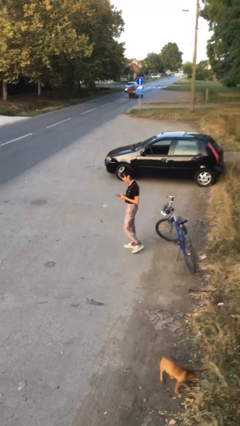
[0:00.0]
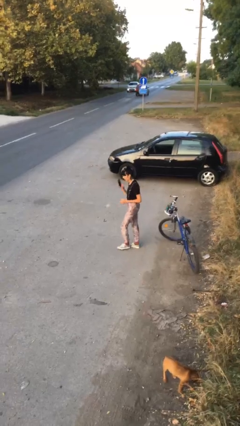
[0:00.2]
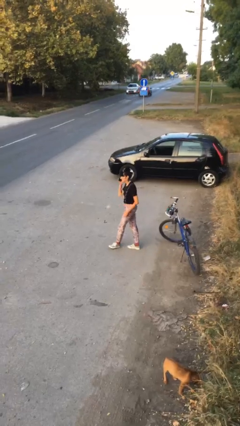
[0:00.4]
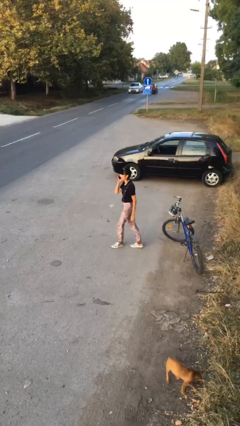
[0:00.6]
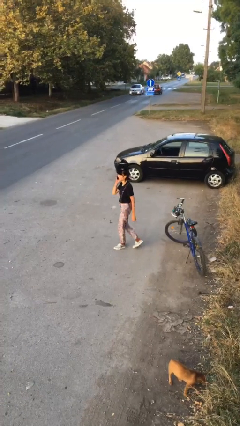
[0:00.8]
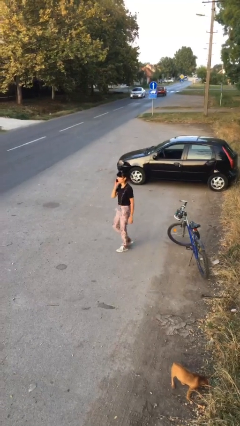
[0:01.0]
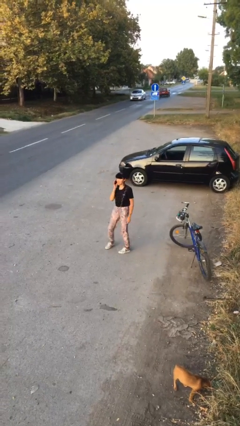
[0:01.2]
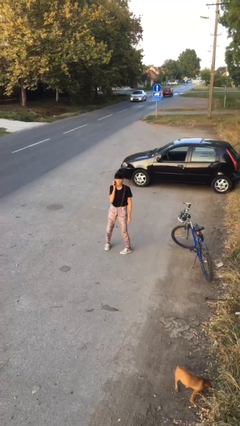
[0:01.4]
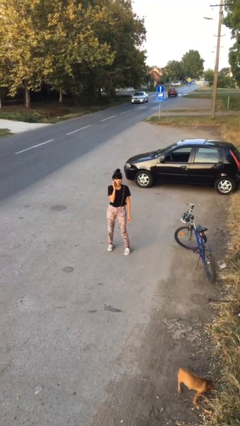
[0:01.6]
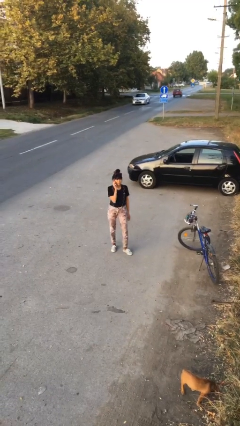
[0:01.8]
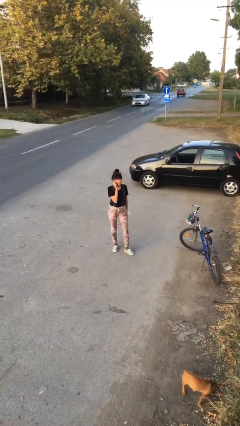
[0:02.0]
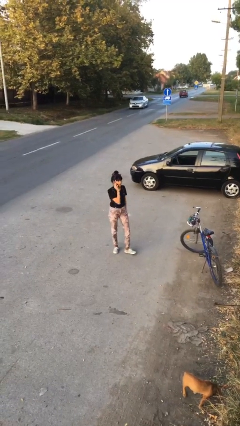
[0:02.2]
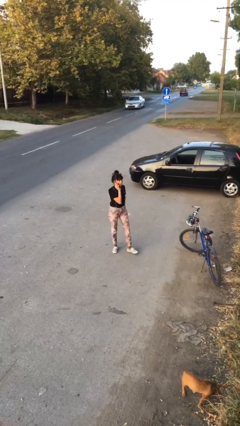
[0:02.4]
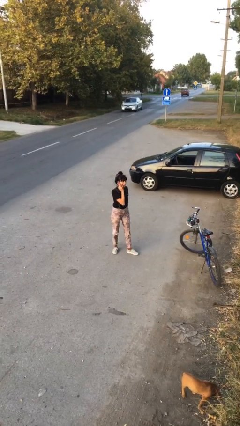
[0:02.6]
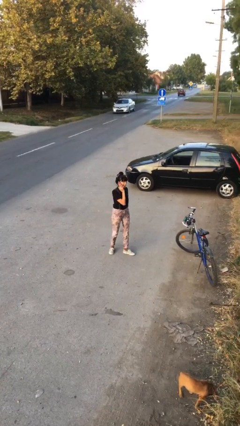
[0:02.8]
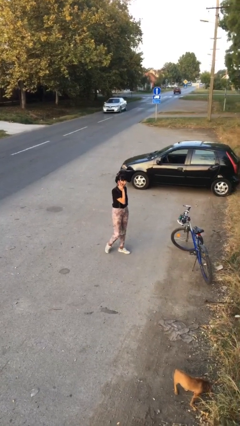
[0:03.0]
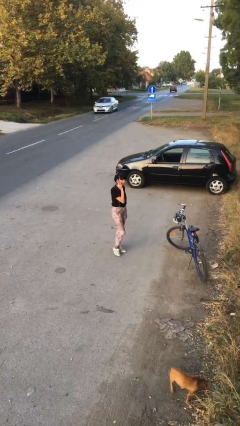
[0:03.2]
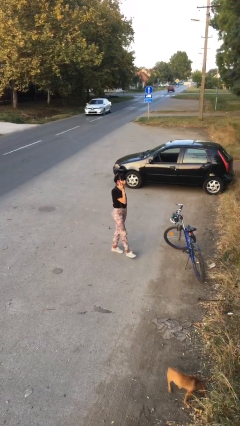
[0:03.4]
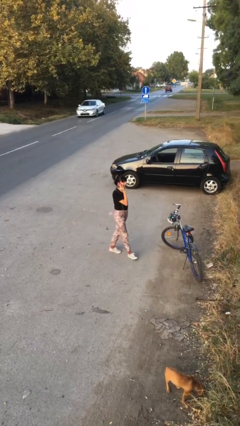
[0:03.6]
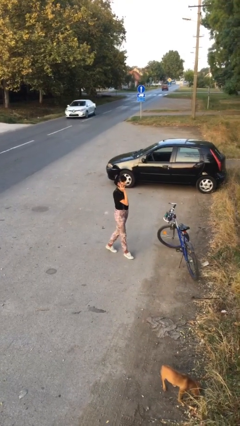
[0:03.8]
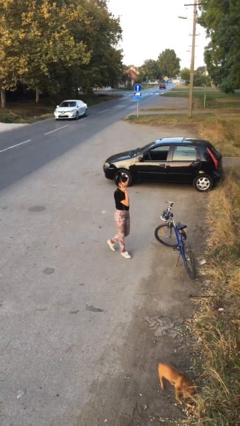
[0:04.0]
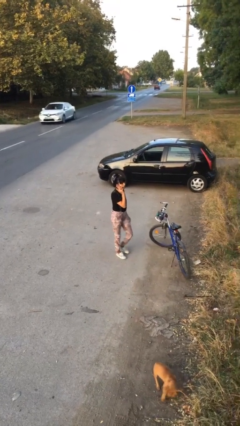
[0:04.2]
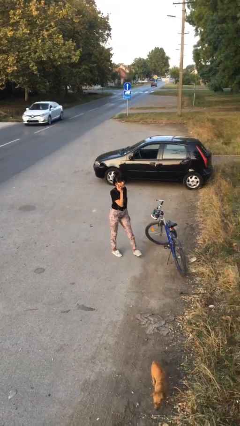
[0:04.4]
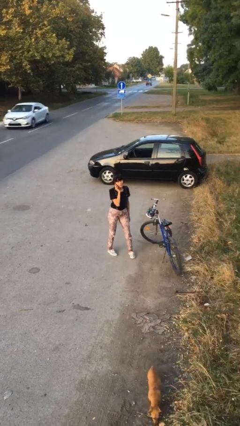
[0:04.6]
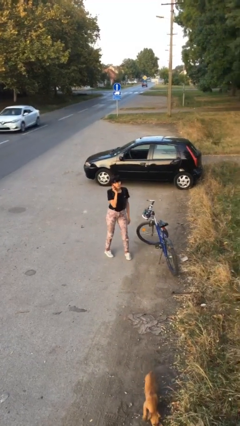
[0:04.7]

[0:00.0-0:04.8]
person talks on phone

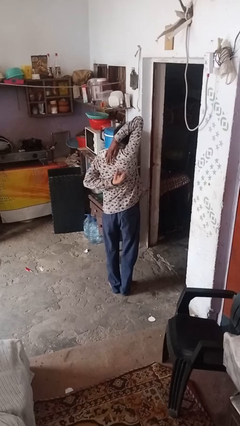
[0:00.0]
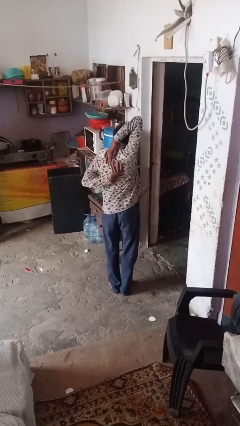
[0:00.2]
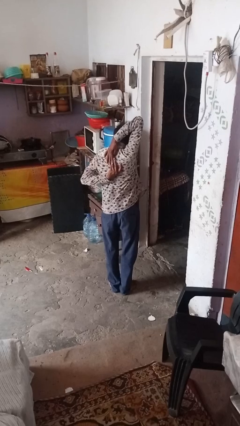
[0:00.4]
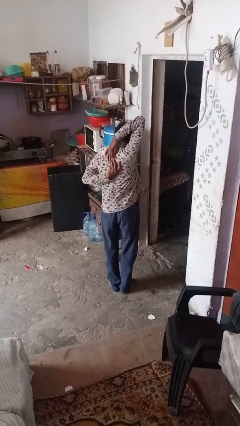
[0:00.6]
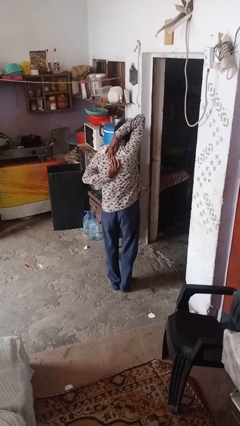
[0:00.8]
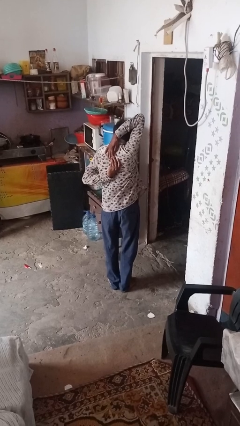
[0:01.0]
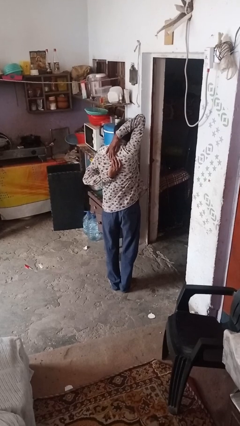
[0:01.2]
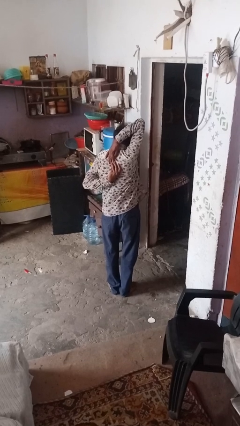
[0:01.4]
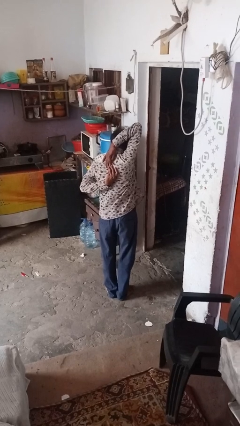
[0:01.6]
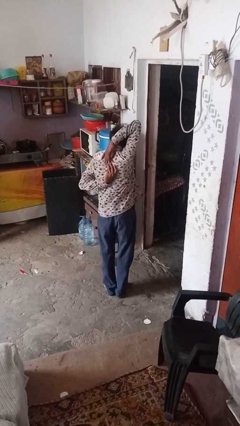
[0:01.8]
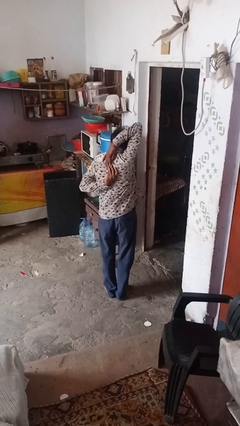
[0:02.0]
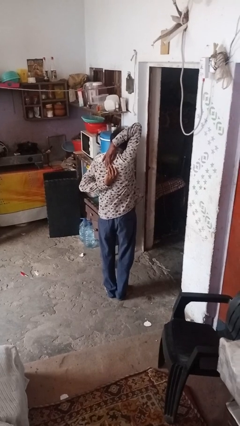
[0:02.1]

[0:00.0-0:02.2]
person stretches arms to side

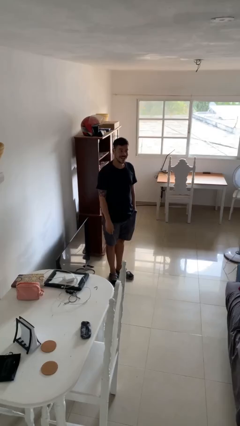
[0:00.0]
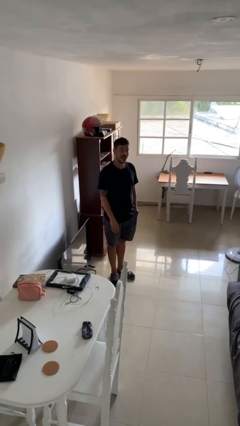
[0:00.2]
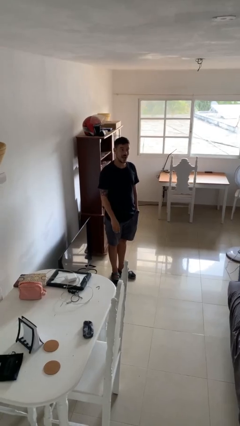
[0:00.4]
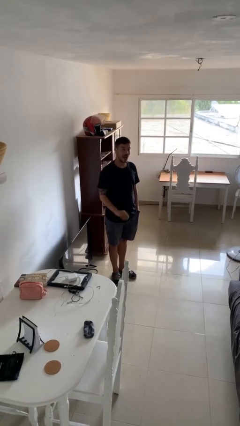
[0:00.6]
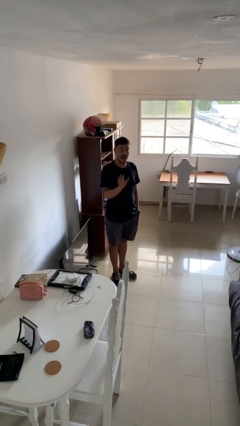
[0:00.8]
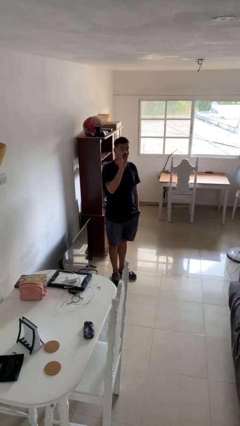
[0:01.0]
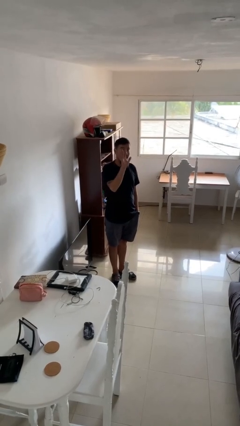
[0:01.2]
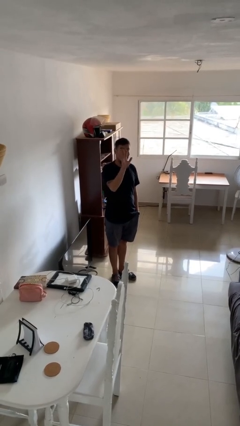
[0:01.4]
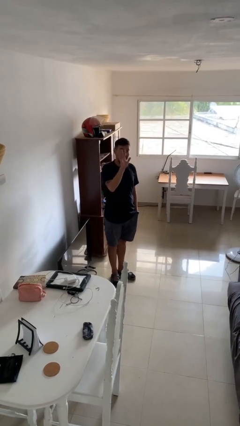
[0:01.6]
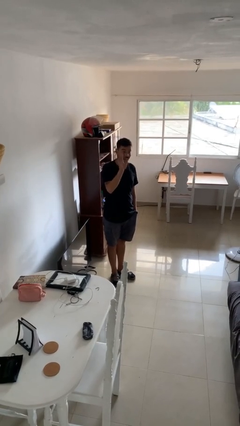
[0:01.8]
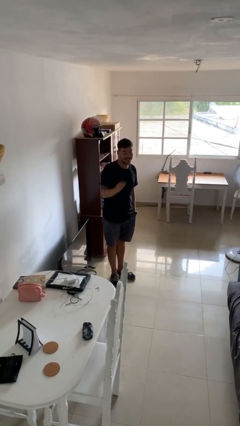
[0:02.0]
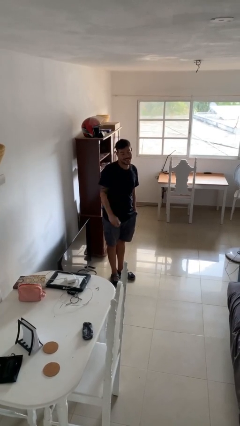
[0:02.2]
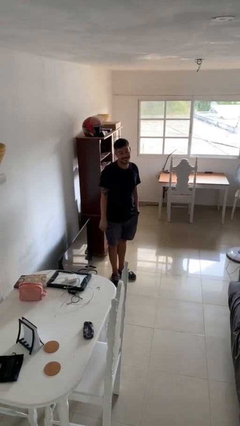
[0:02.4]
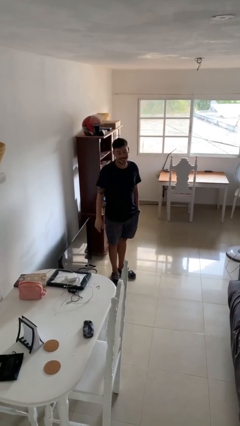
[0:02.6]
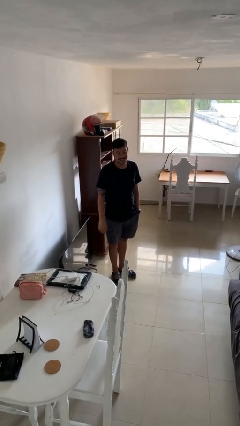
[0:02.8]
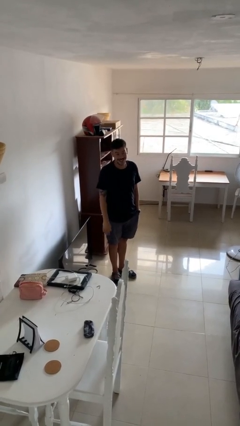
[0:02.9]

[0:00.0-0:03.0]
person waves at person

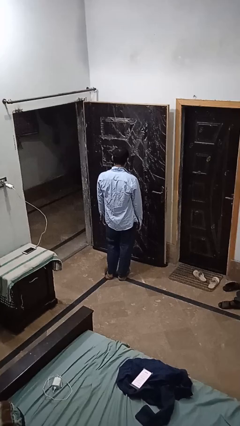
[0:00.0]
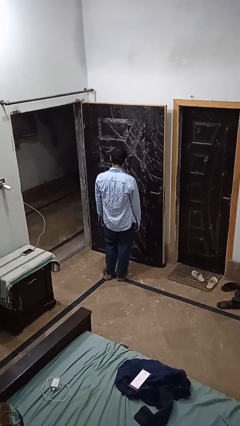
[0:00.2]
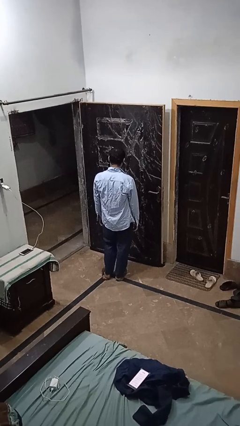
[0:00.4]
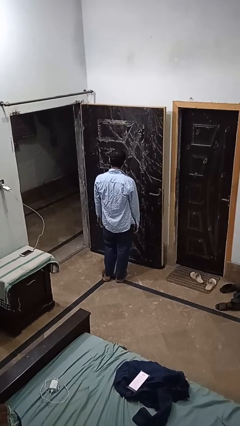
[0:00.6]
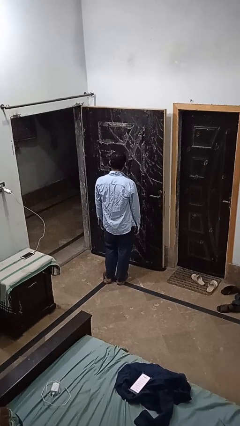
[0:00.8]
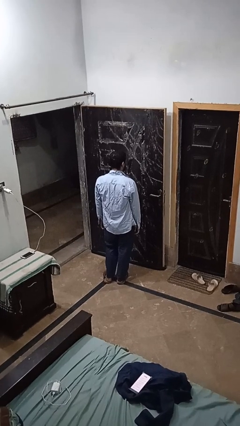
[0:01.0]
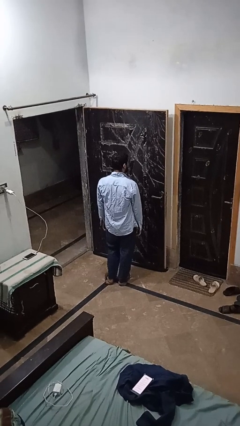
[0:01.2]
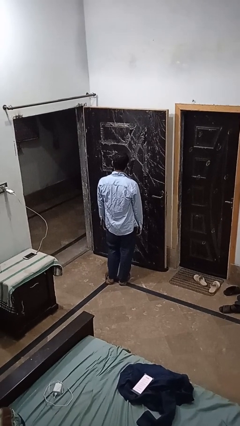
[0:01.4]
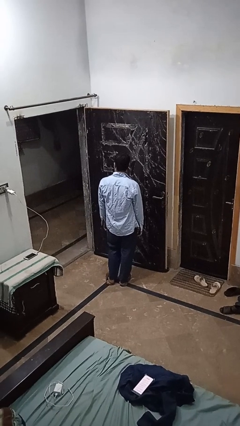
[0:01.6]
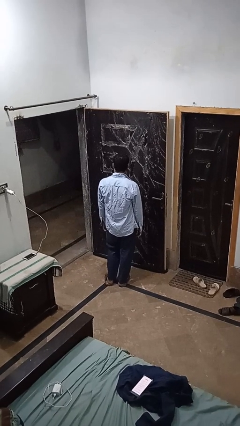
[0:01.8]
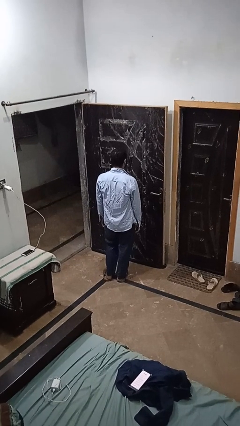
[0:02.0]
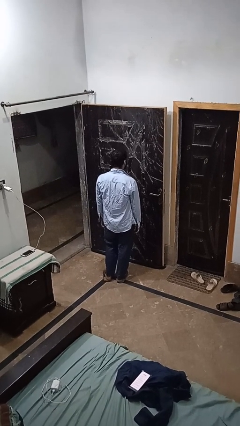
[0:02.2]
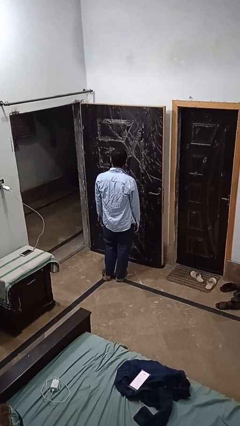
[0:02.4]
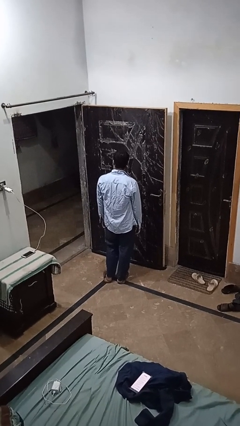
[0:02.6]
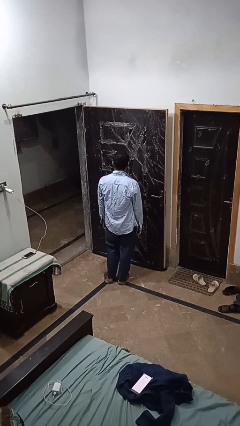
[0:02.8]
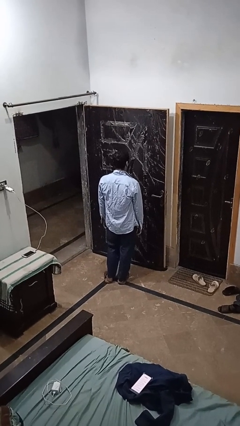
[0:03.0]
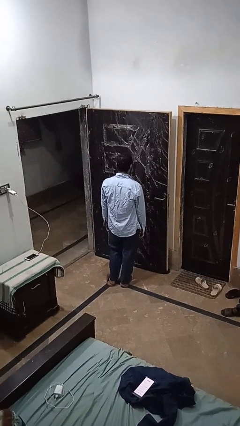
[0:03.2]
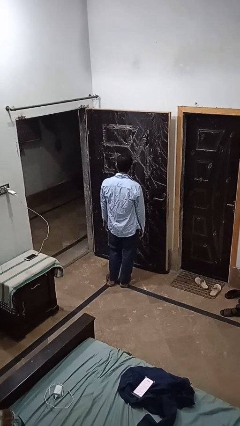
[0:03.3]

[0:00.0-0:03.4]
person shakes head

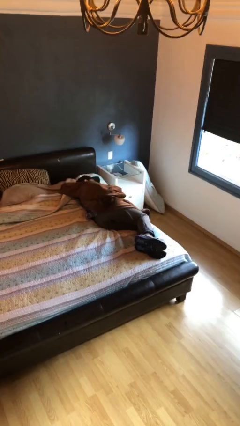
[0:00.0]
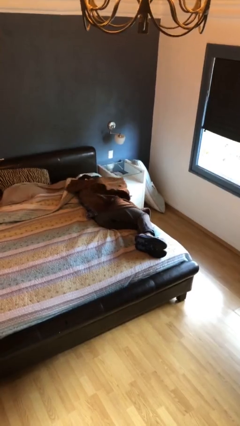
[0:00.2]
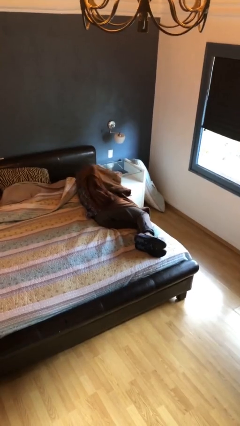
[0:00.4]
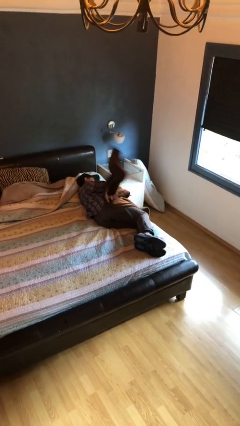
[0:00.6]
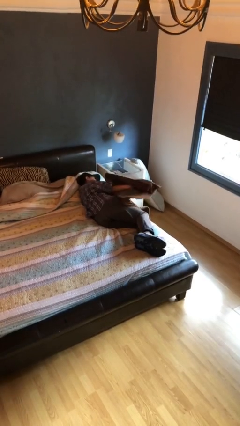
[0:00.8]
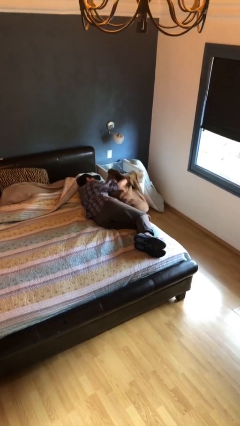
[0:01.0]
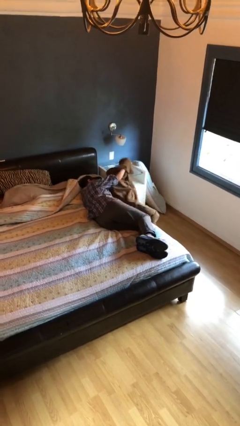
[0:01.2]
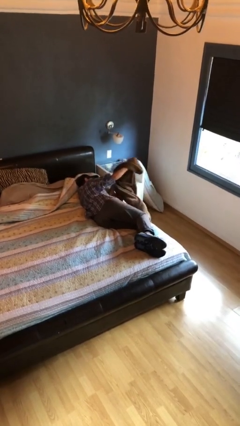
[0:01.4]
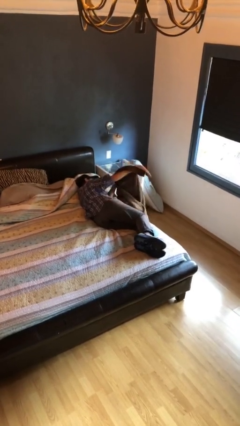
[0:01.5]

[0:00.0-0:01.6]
person uncovers with blanket

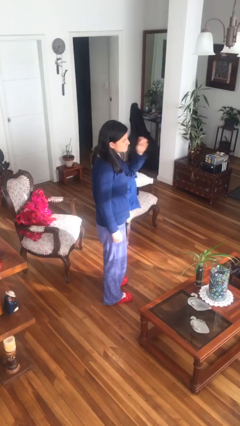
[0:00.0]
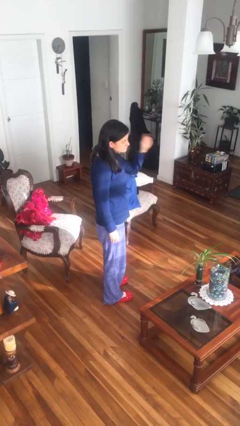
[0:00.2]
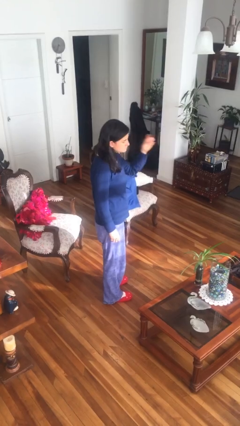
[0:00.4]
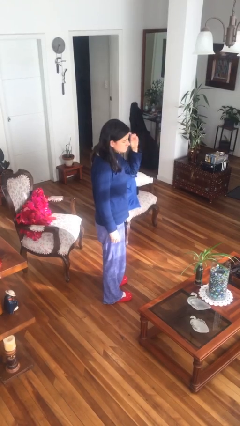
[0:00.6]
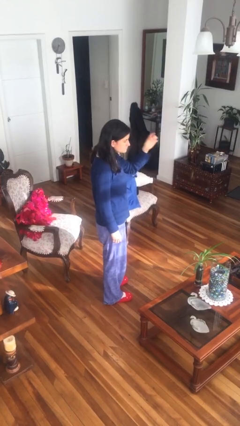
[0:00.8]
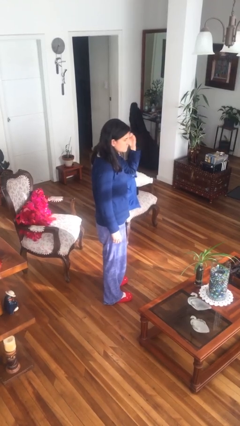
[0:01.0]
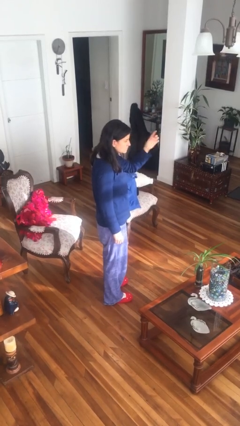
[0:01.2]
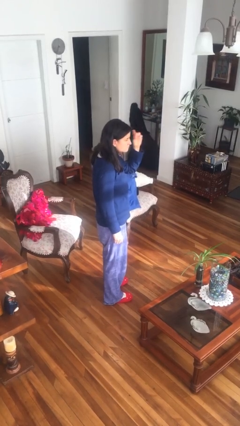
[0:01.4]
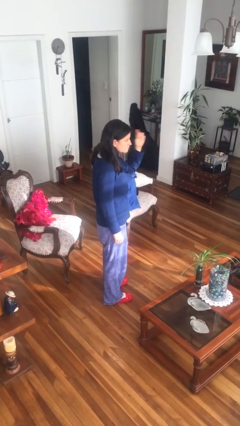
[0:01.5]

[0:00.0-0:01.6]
person snaps fingers

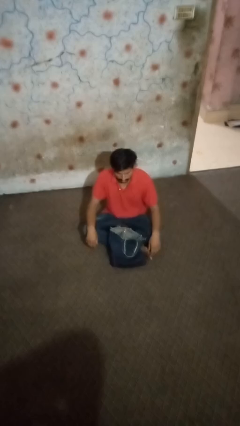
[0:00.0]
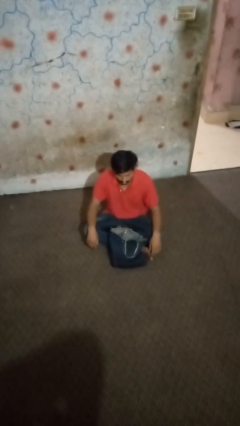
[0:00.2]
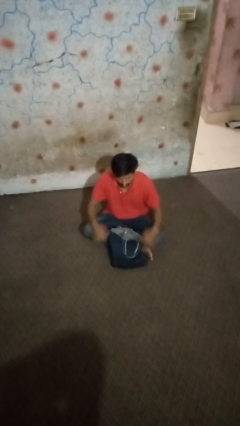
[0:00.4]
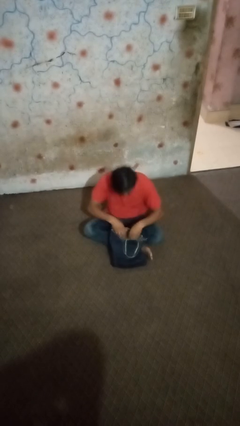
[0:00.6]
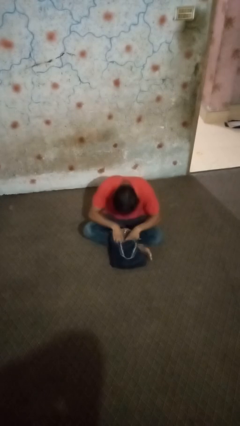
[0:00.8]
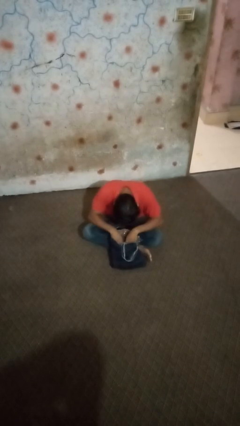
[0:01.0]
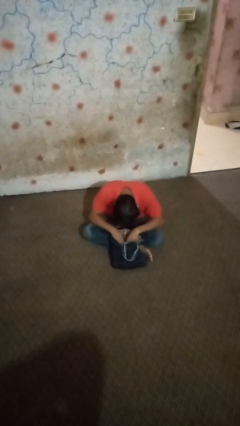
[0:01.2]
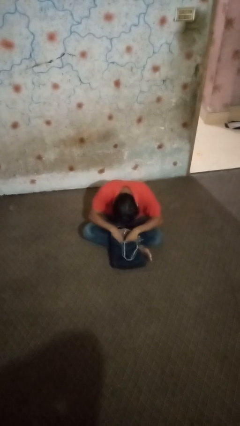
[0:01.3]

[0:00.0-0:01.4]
person searches in bag
